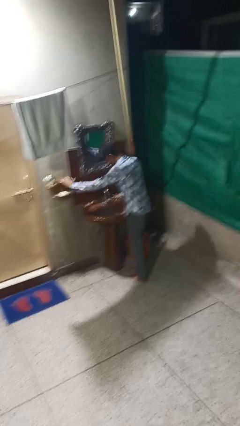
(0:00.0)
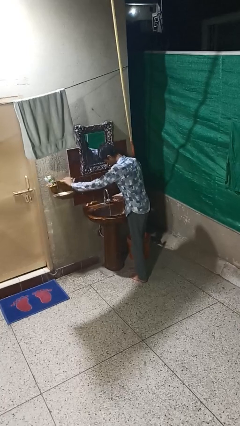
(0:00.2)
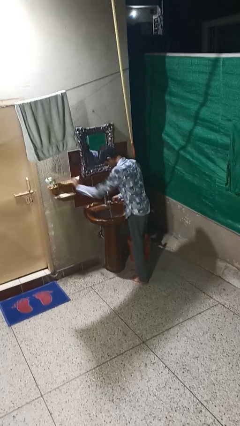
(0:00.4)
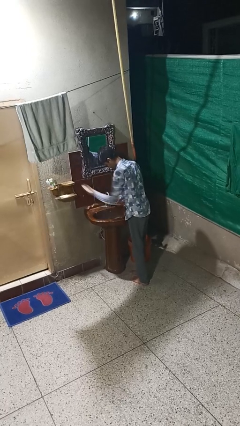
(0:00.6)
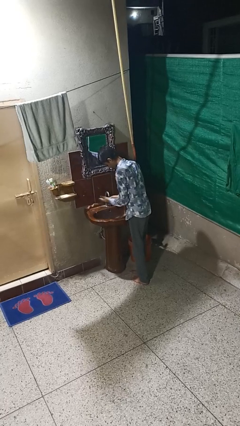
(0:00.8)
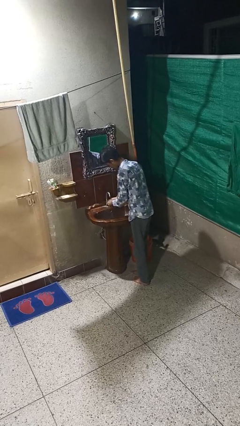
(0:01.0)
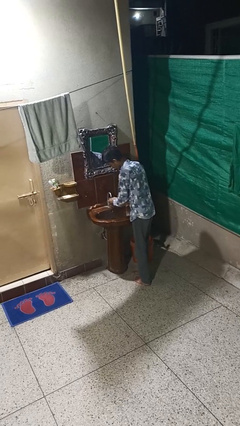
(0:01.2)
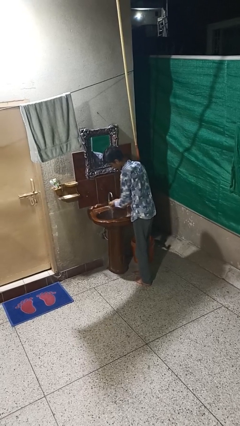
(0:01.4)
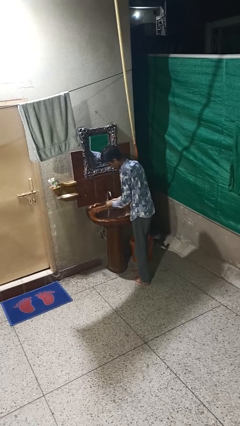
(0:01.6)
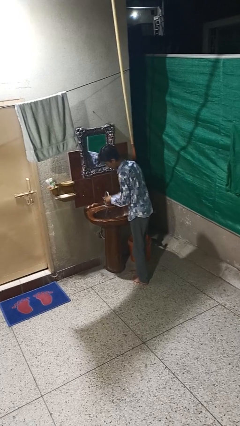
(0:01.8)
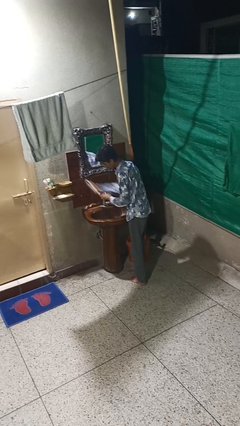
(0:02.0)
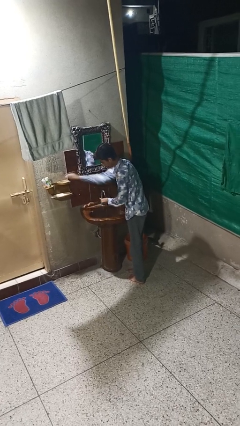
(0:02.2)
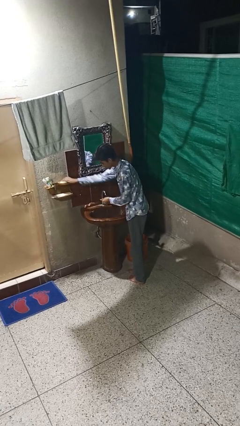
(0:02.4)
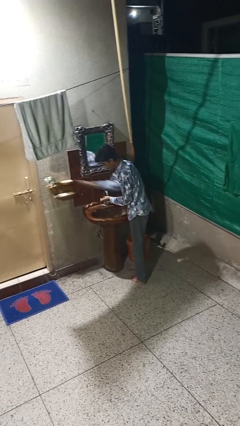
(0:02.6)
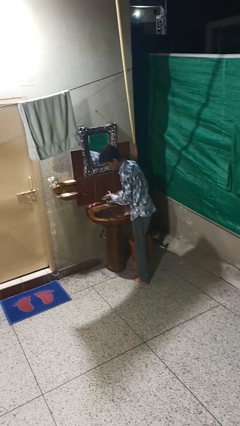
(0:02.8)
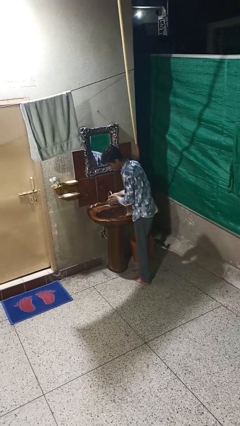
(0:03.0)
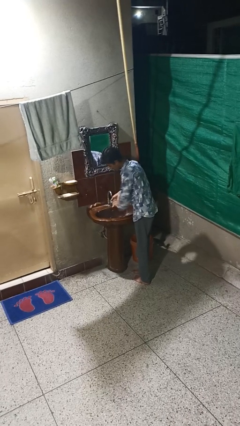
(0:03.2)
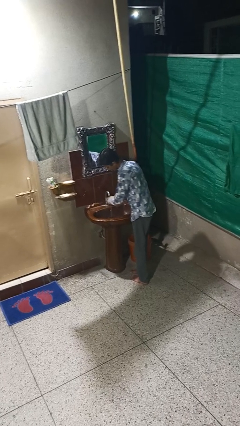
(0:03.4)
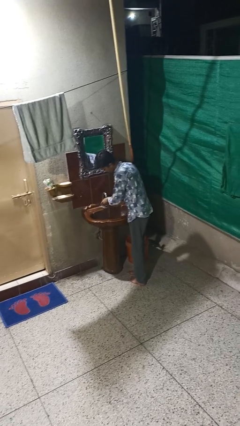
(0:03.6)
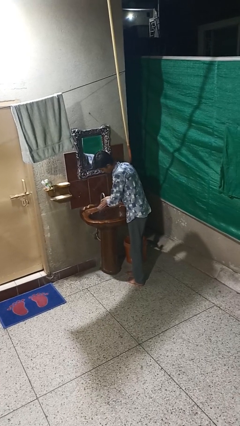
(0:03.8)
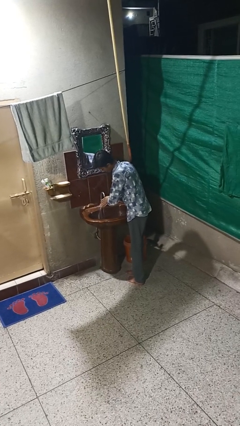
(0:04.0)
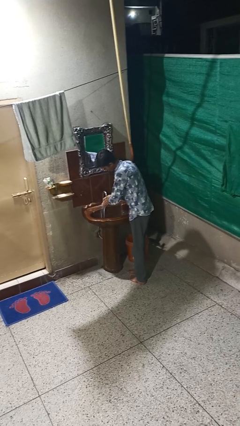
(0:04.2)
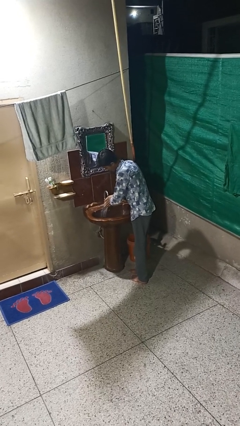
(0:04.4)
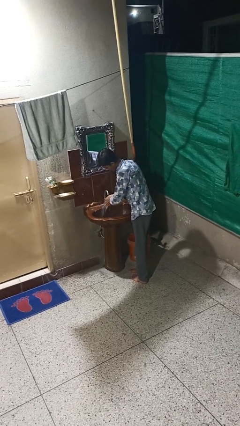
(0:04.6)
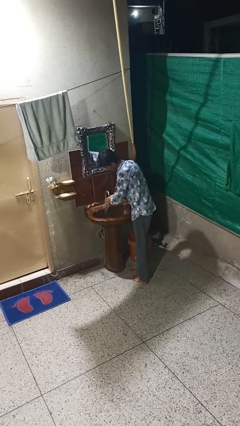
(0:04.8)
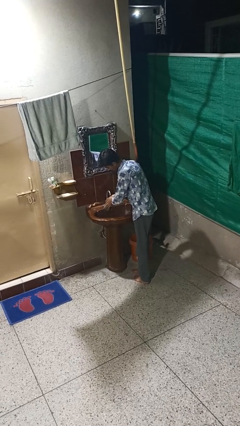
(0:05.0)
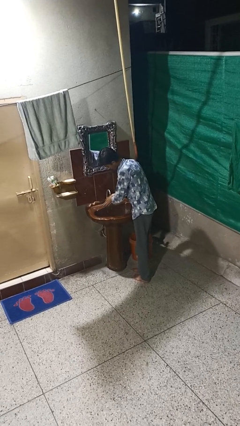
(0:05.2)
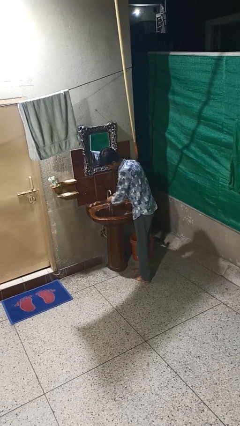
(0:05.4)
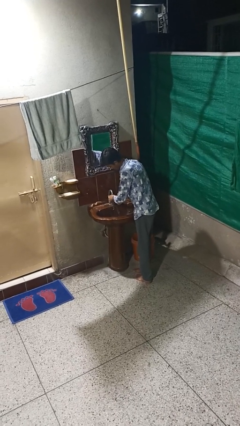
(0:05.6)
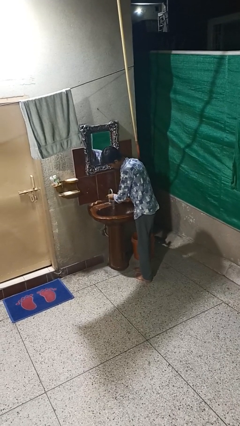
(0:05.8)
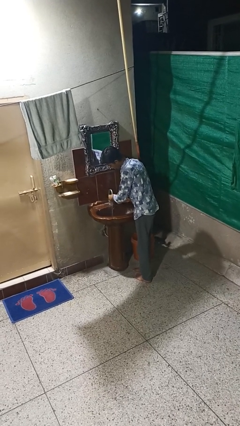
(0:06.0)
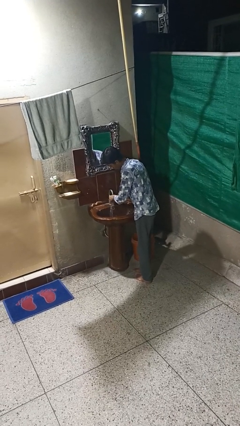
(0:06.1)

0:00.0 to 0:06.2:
person washes hands

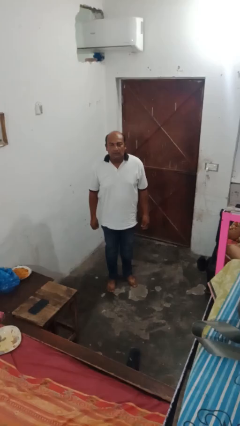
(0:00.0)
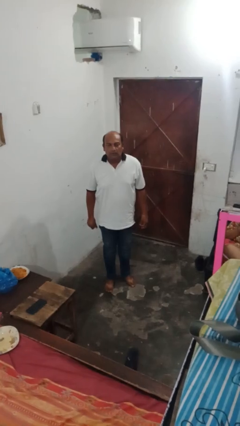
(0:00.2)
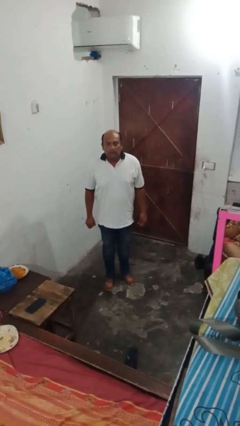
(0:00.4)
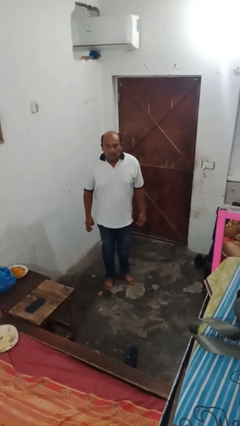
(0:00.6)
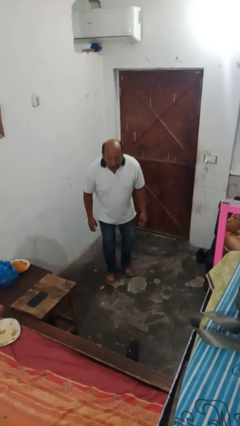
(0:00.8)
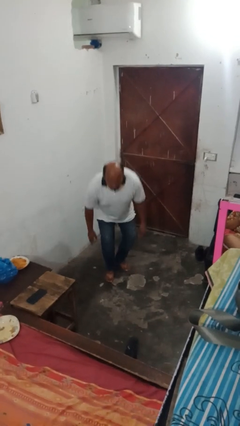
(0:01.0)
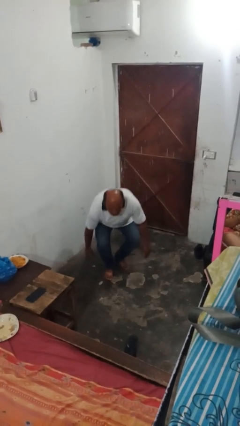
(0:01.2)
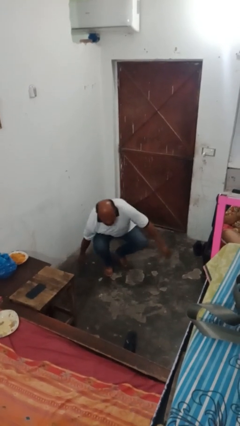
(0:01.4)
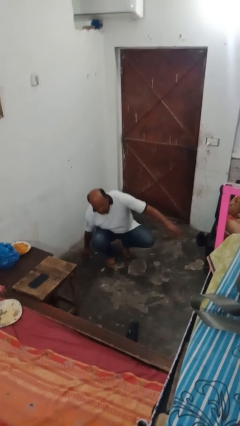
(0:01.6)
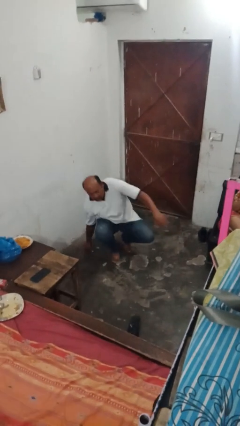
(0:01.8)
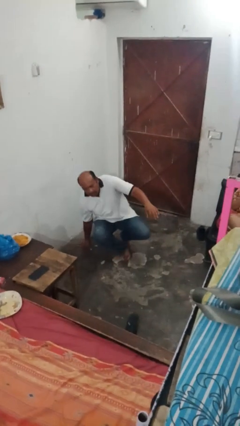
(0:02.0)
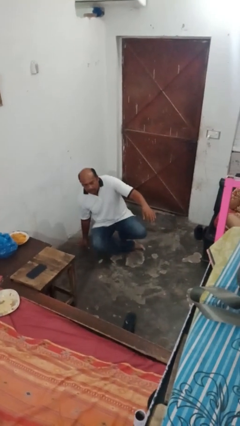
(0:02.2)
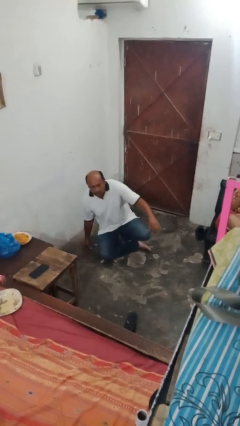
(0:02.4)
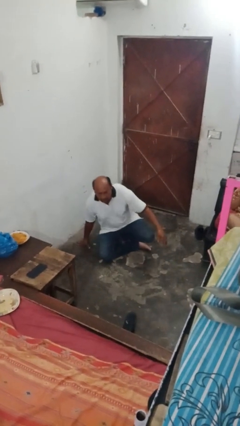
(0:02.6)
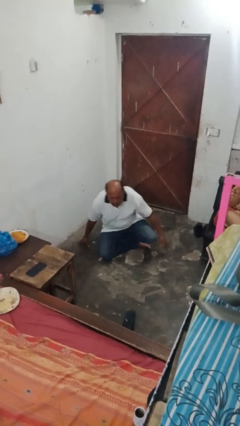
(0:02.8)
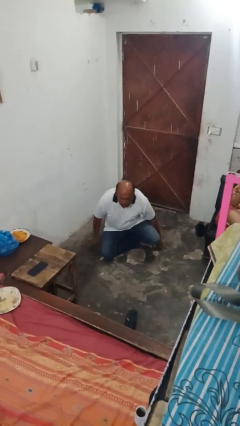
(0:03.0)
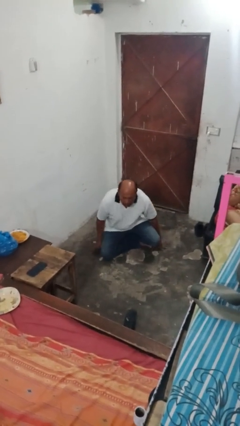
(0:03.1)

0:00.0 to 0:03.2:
person sits crisscross

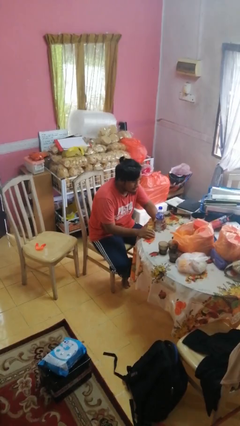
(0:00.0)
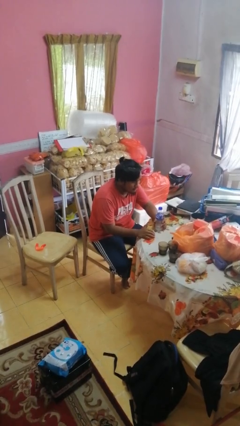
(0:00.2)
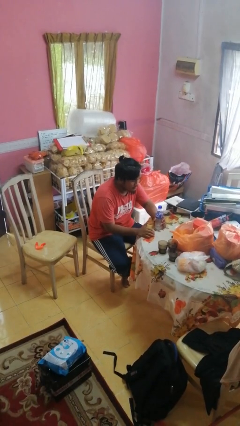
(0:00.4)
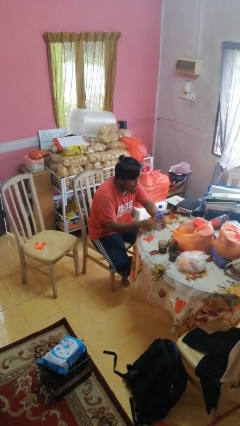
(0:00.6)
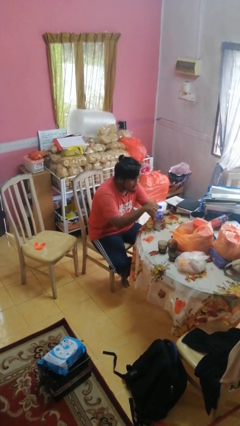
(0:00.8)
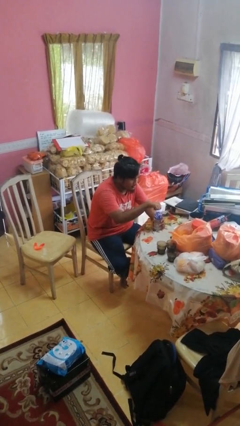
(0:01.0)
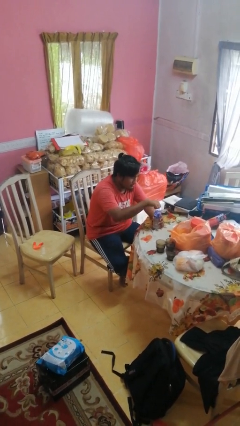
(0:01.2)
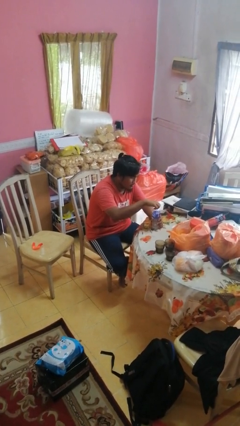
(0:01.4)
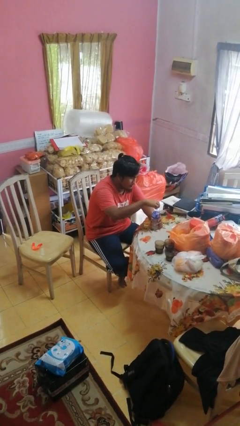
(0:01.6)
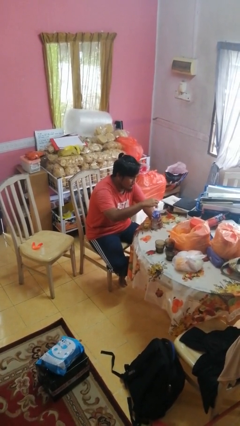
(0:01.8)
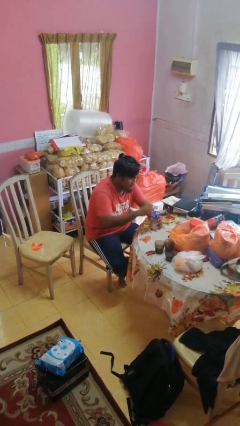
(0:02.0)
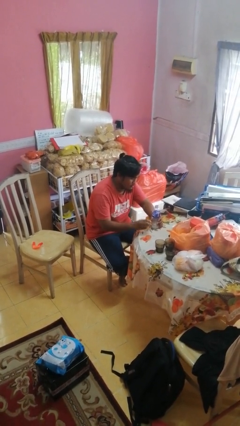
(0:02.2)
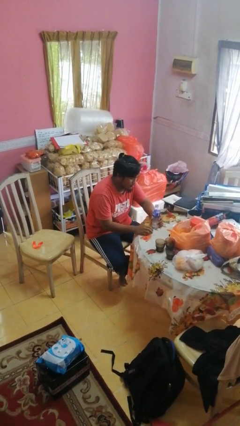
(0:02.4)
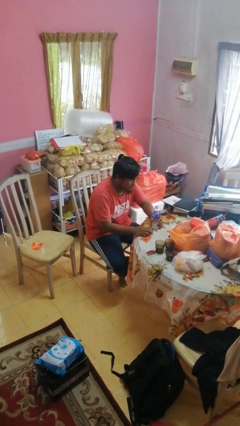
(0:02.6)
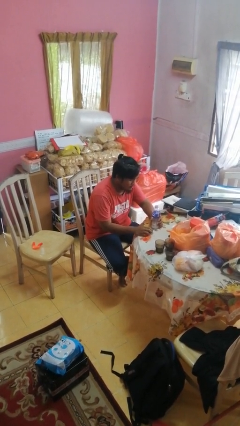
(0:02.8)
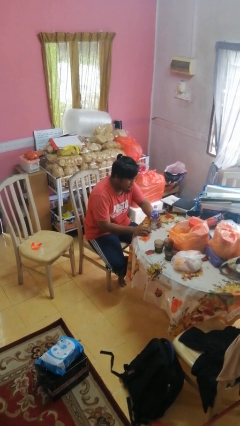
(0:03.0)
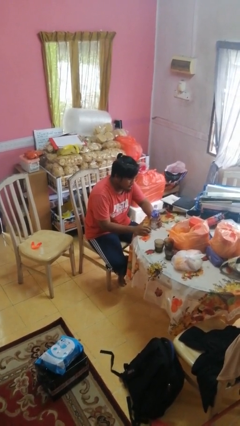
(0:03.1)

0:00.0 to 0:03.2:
person unscrews lid from bottle

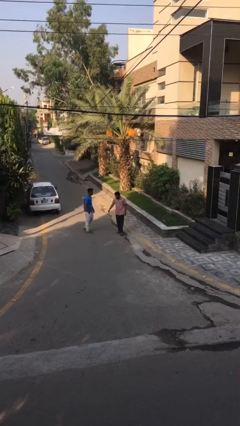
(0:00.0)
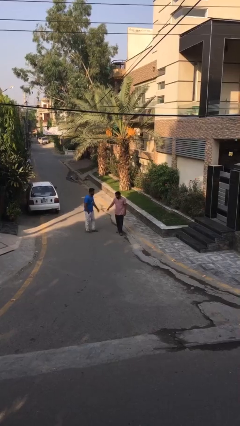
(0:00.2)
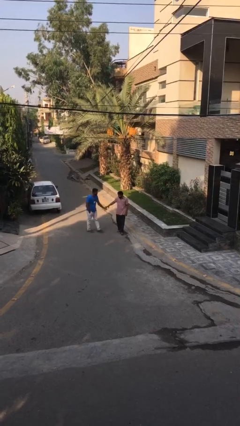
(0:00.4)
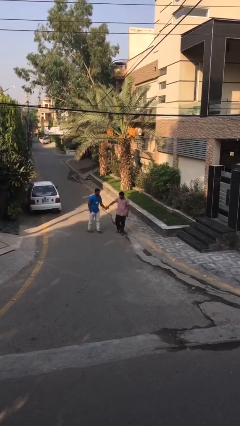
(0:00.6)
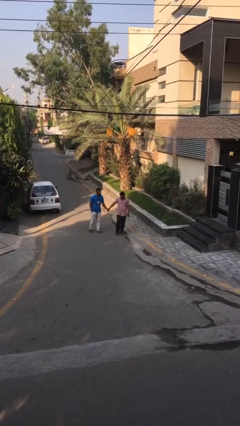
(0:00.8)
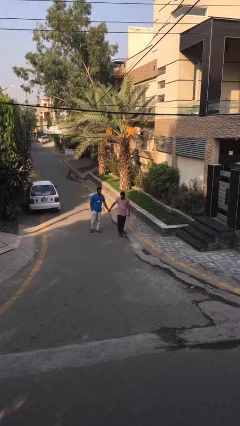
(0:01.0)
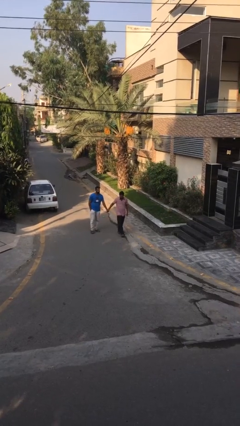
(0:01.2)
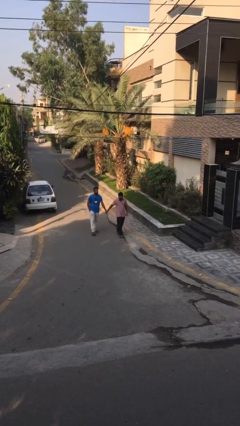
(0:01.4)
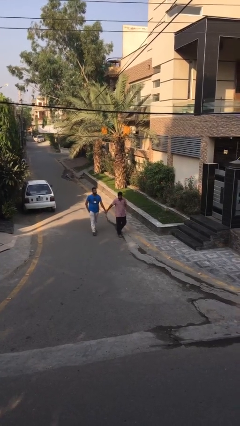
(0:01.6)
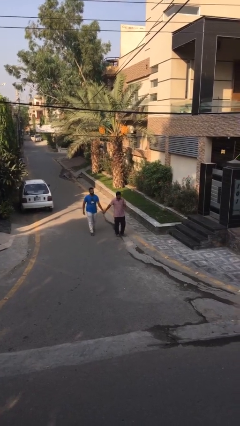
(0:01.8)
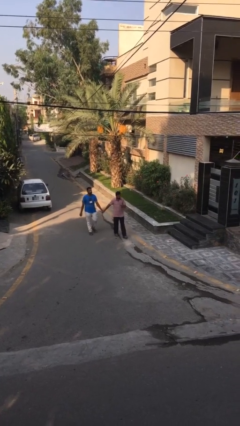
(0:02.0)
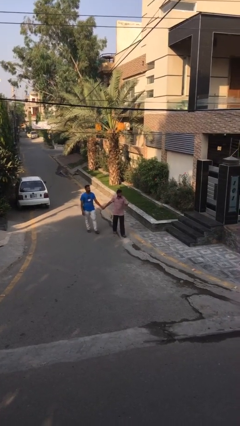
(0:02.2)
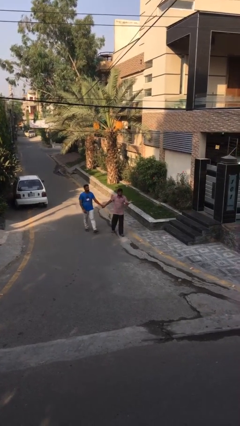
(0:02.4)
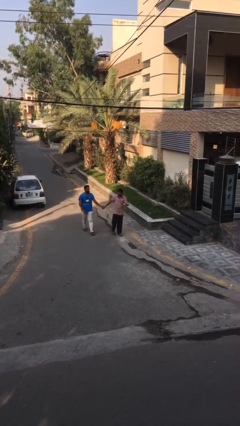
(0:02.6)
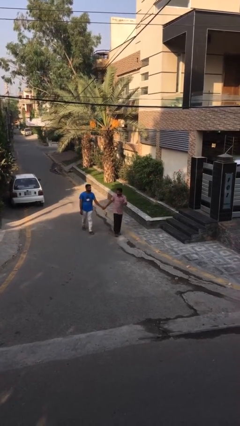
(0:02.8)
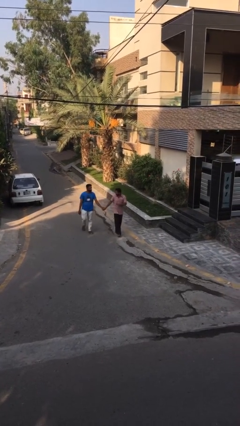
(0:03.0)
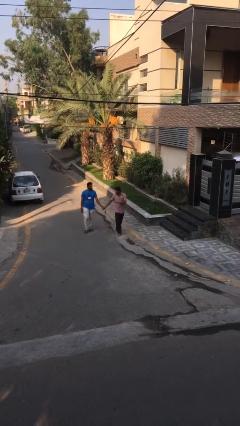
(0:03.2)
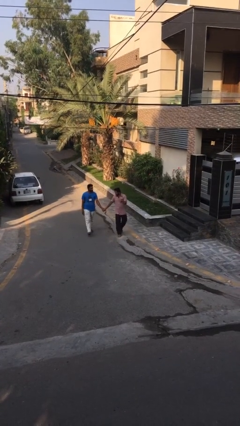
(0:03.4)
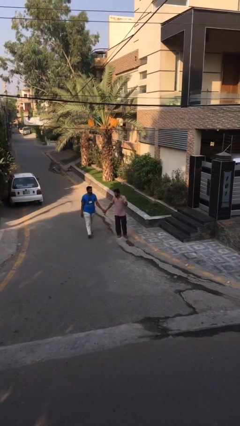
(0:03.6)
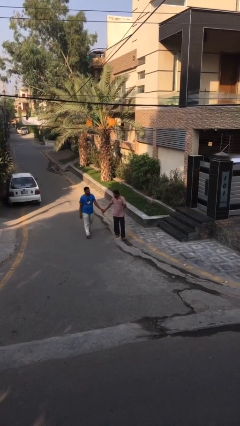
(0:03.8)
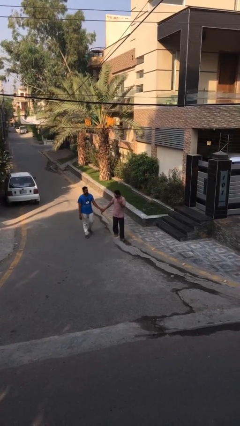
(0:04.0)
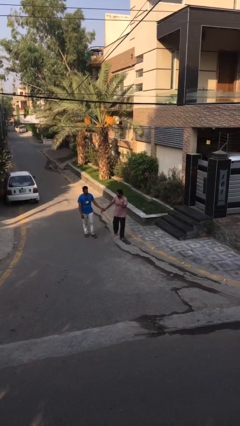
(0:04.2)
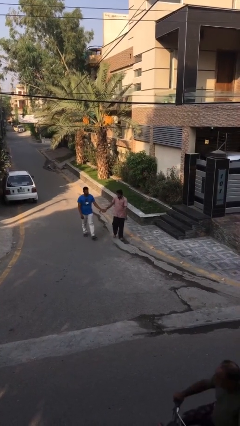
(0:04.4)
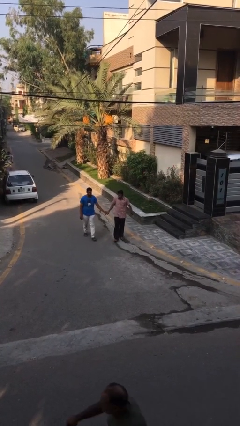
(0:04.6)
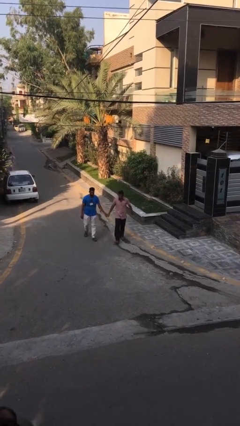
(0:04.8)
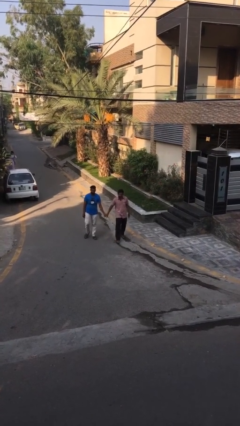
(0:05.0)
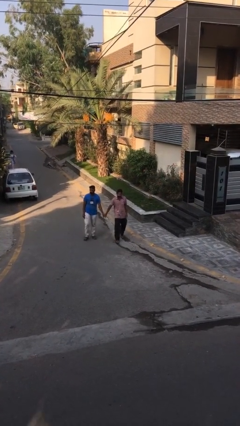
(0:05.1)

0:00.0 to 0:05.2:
person holds hand
